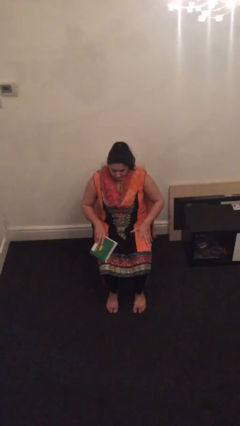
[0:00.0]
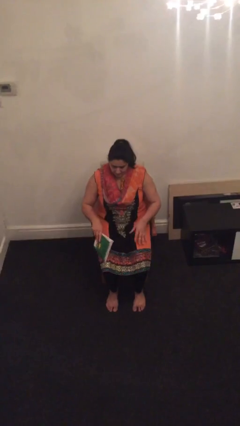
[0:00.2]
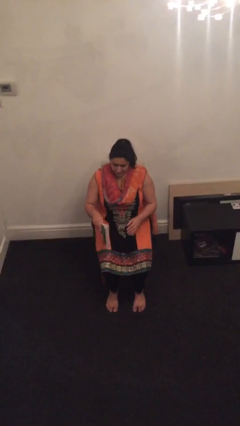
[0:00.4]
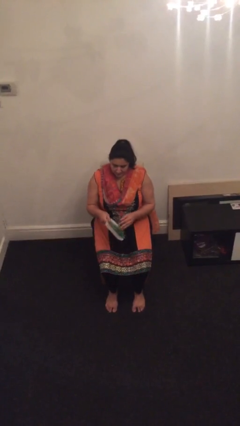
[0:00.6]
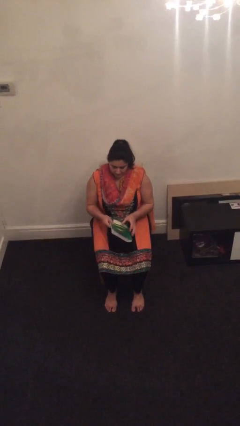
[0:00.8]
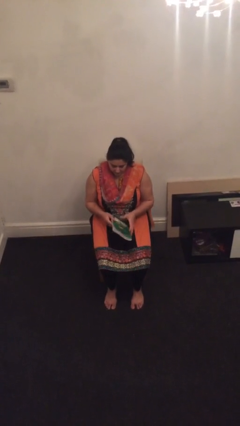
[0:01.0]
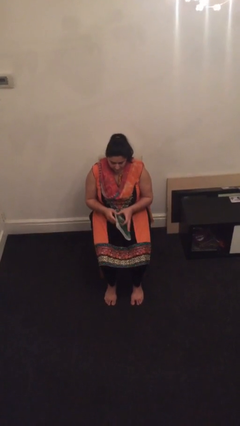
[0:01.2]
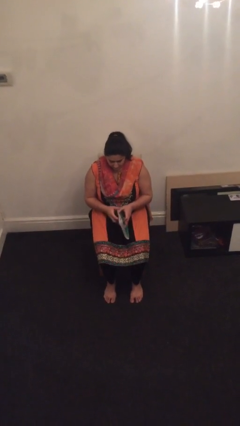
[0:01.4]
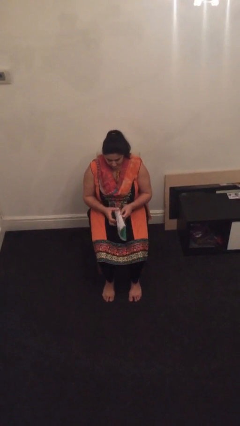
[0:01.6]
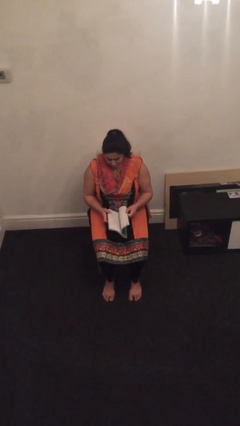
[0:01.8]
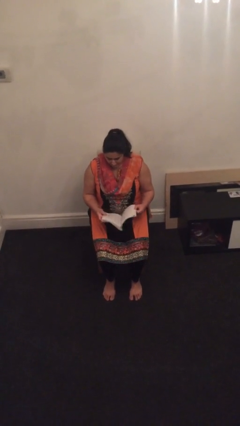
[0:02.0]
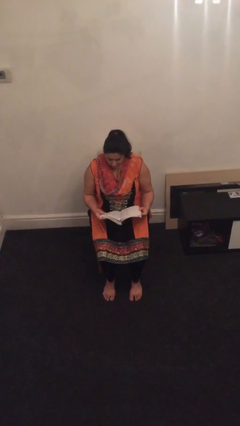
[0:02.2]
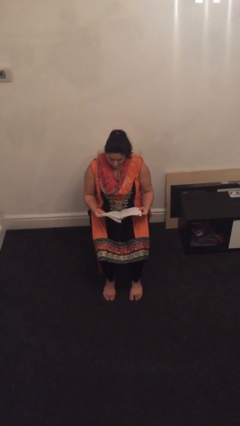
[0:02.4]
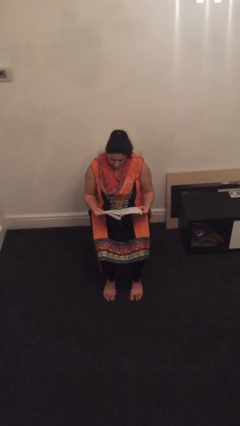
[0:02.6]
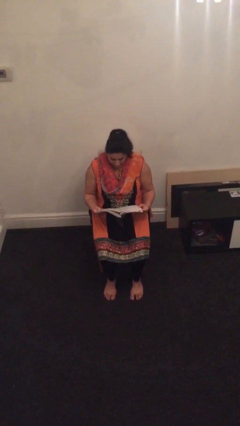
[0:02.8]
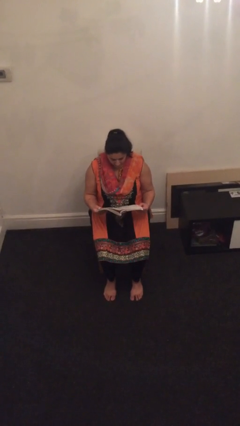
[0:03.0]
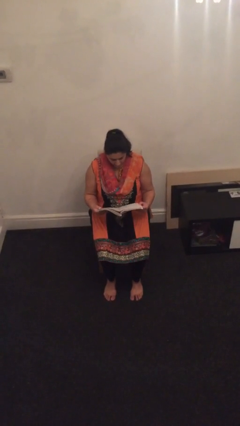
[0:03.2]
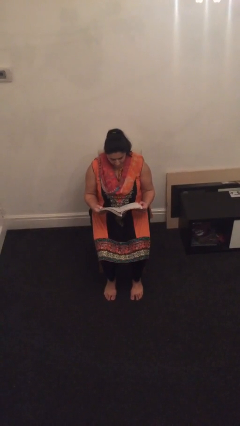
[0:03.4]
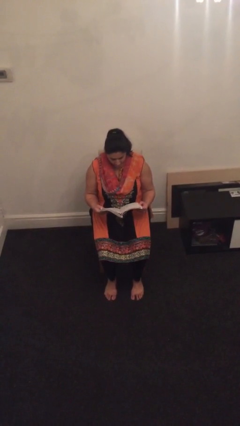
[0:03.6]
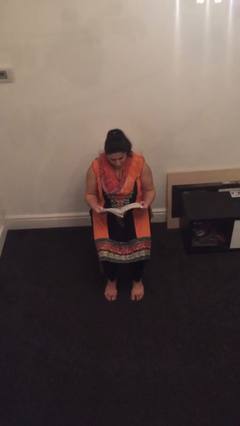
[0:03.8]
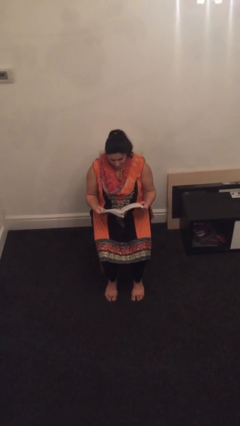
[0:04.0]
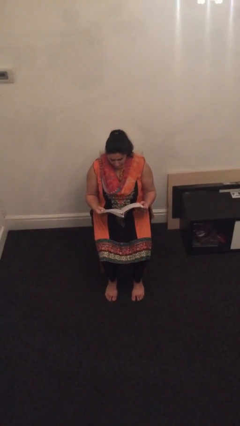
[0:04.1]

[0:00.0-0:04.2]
person reads document

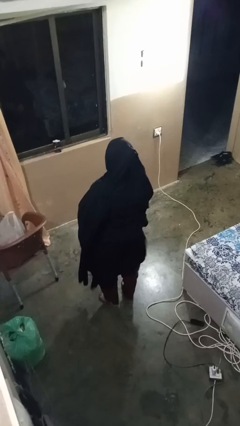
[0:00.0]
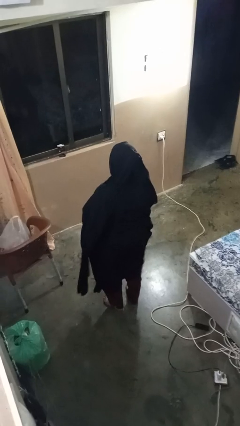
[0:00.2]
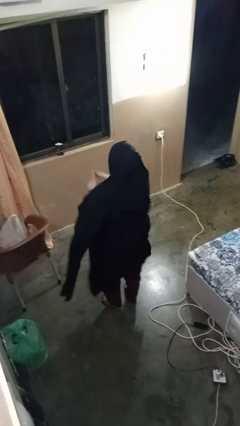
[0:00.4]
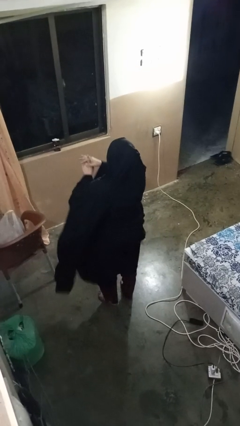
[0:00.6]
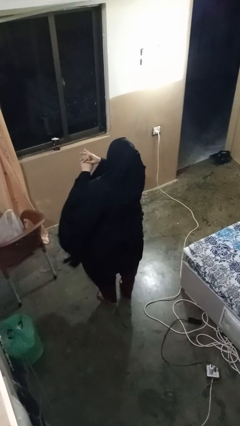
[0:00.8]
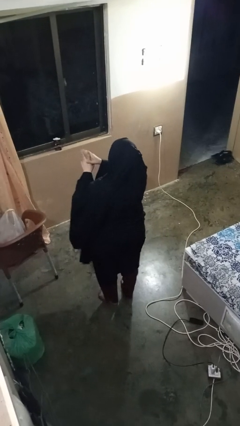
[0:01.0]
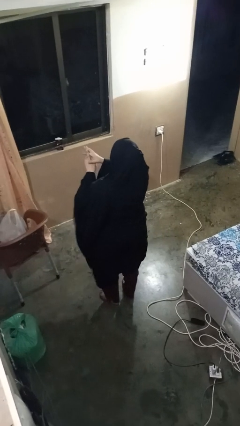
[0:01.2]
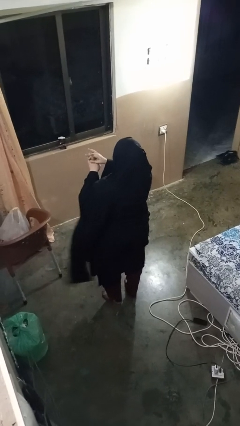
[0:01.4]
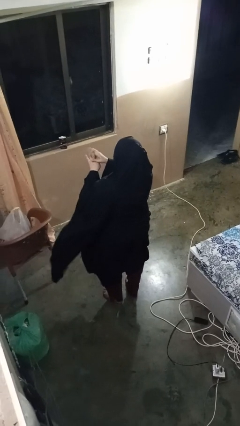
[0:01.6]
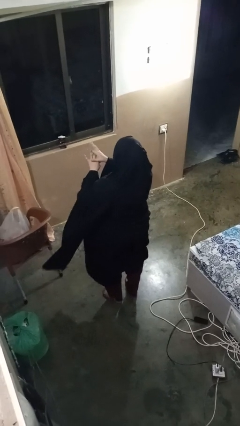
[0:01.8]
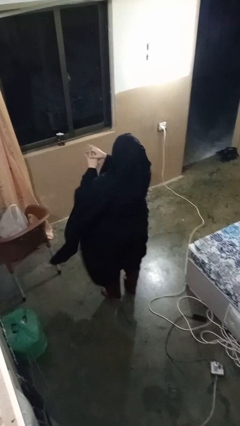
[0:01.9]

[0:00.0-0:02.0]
person cracks knuckles

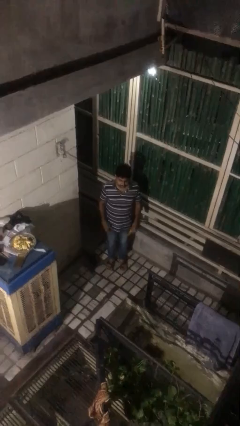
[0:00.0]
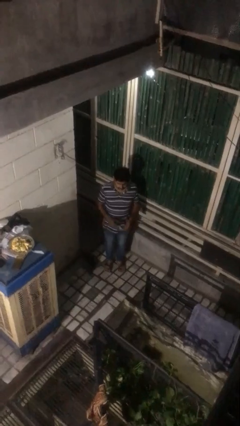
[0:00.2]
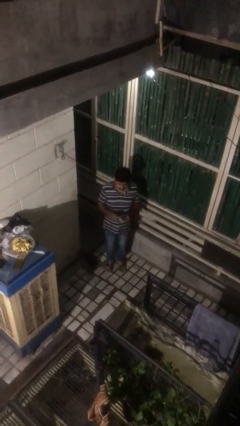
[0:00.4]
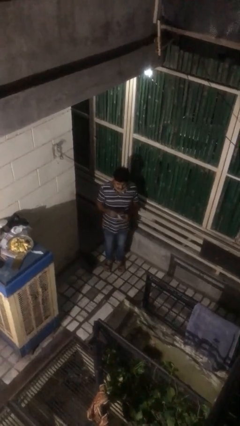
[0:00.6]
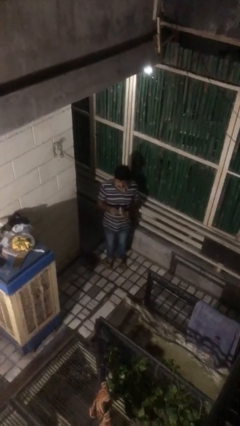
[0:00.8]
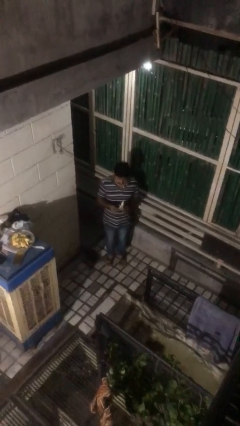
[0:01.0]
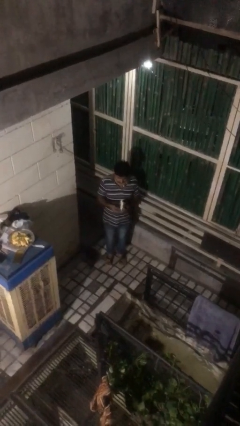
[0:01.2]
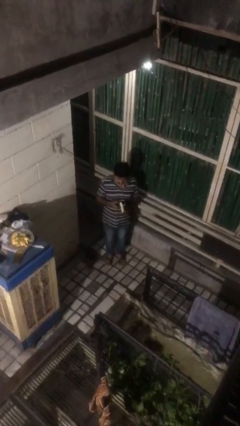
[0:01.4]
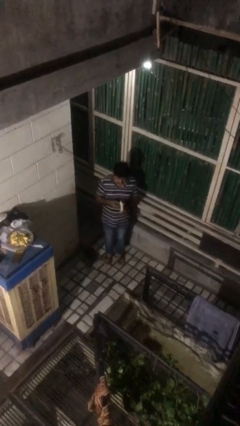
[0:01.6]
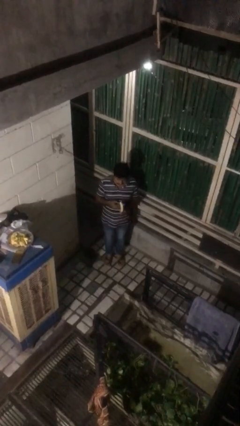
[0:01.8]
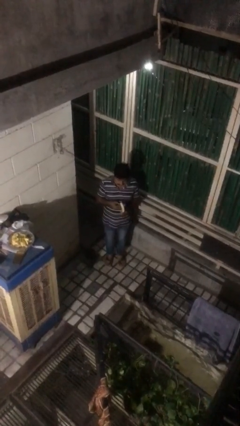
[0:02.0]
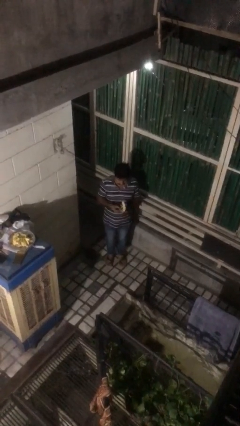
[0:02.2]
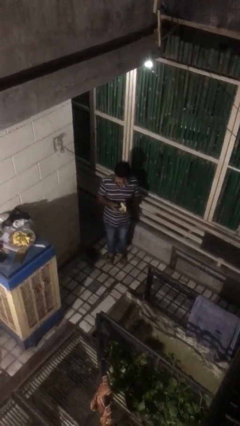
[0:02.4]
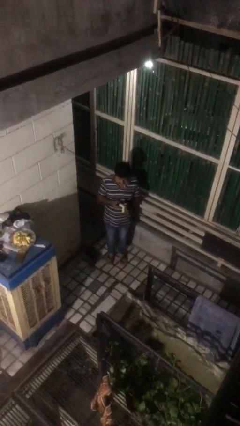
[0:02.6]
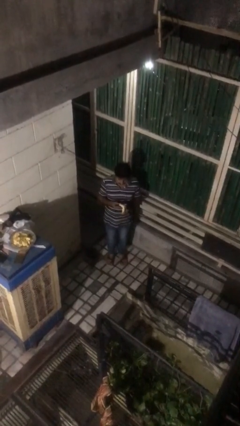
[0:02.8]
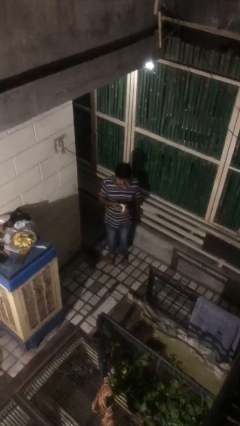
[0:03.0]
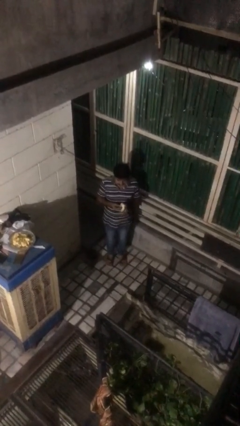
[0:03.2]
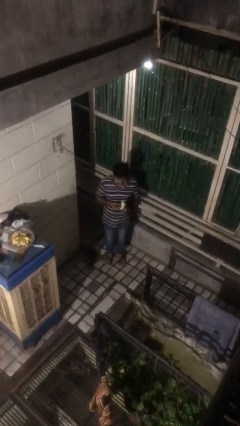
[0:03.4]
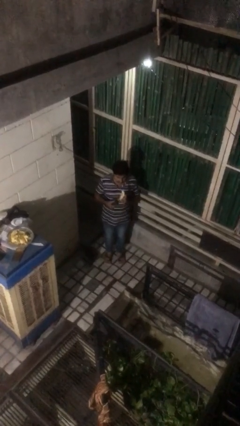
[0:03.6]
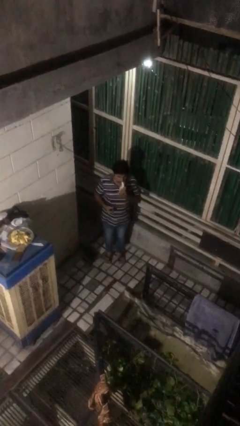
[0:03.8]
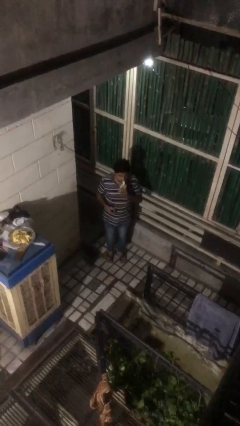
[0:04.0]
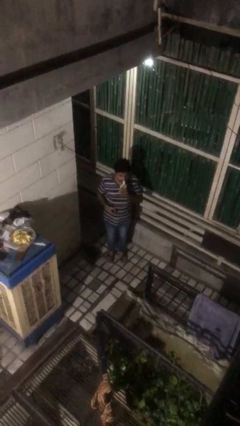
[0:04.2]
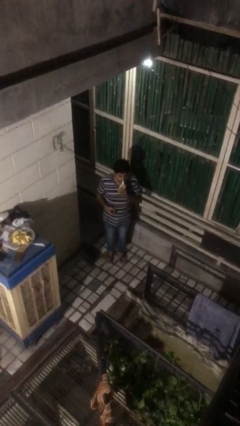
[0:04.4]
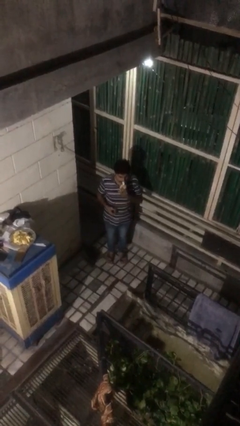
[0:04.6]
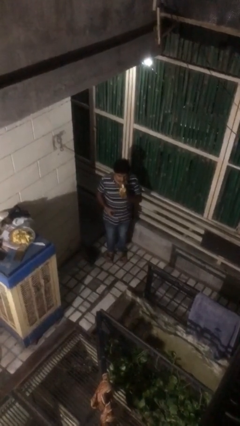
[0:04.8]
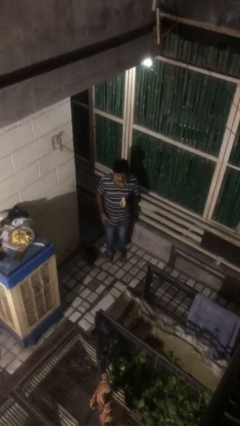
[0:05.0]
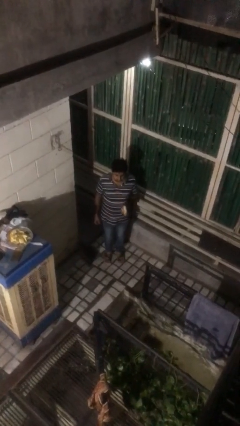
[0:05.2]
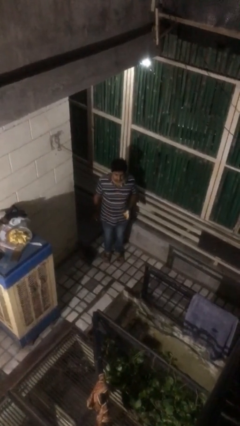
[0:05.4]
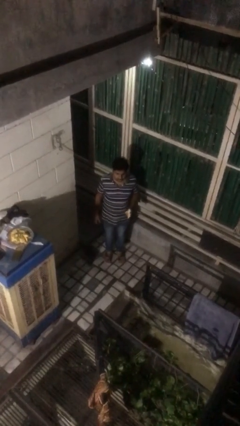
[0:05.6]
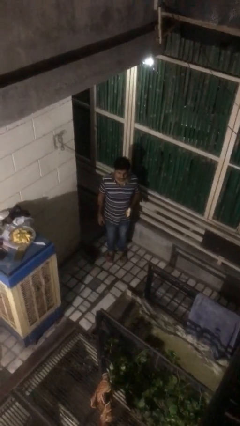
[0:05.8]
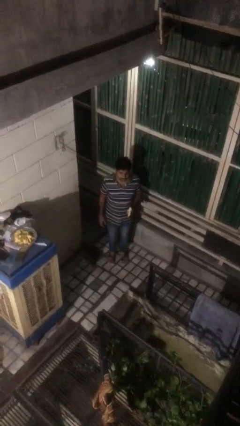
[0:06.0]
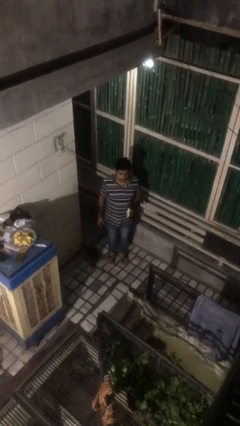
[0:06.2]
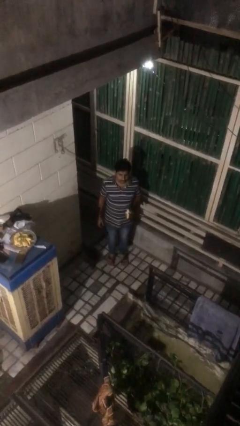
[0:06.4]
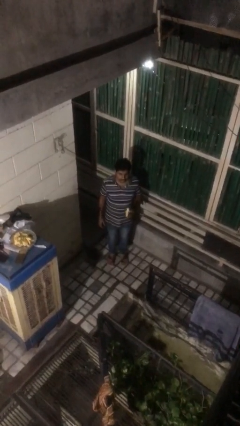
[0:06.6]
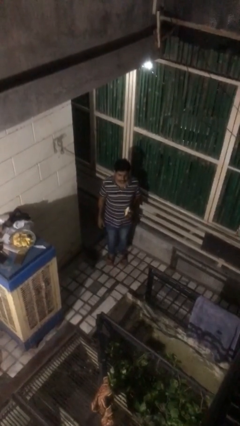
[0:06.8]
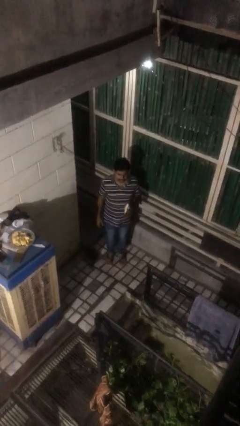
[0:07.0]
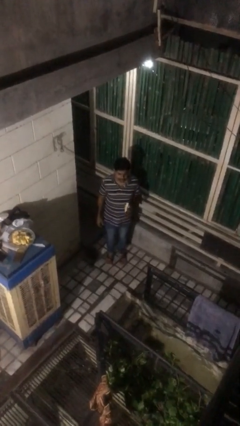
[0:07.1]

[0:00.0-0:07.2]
person eats banana

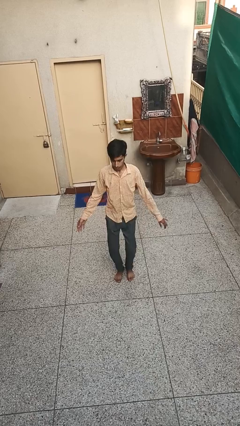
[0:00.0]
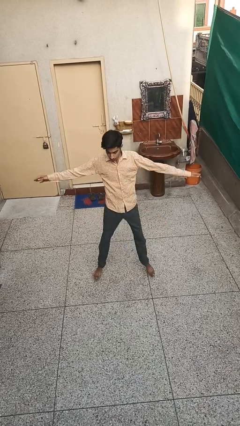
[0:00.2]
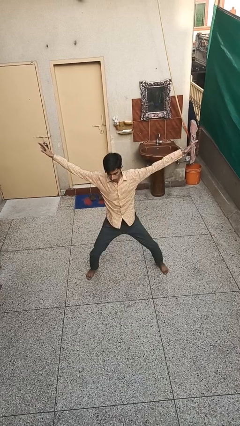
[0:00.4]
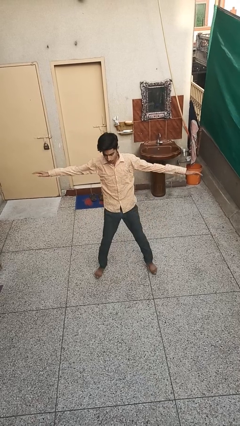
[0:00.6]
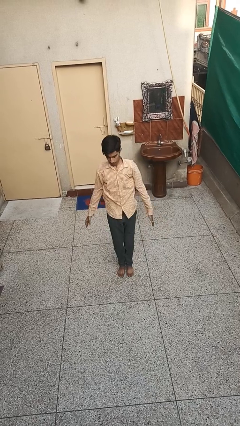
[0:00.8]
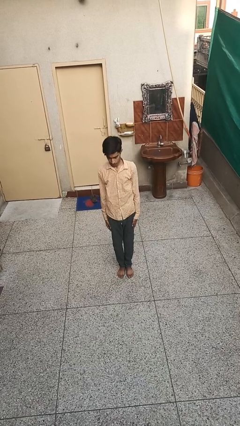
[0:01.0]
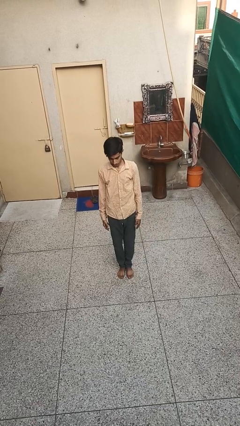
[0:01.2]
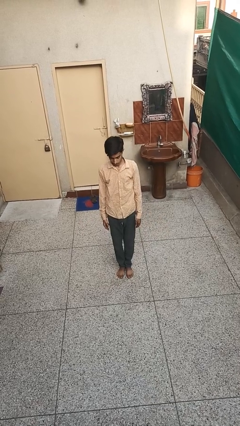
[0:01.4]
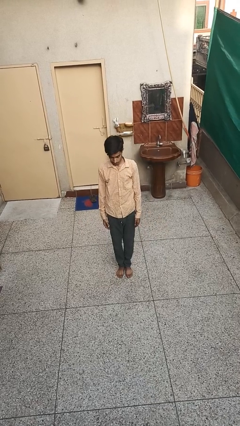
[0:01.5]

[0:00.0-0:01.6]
person exercises with jumping jacks

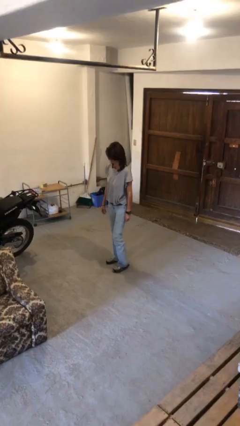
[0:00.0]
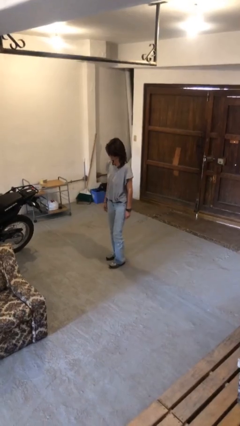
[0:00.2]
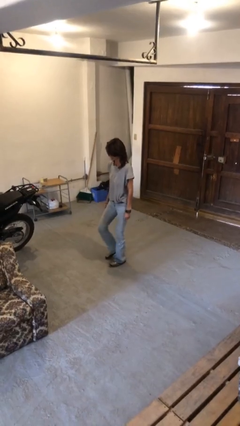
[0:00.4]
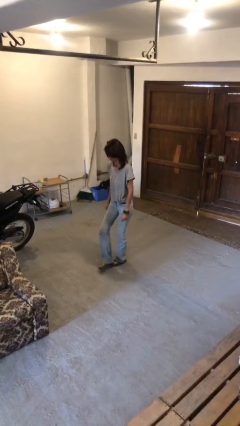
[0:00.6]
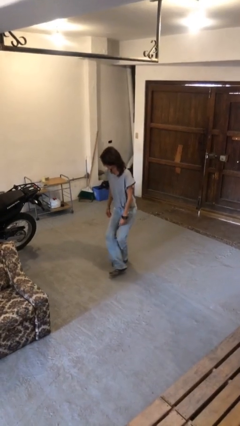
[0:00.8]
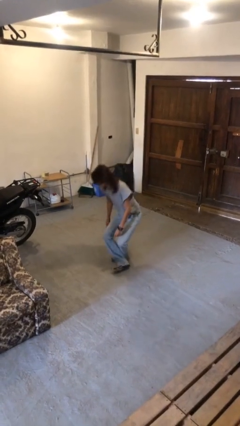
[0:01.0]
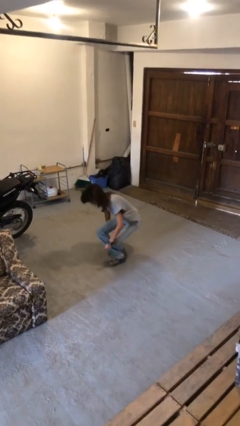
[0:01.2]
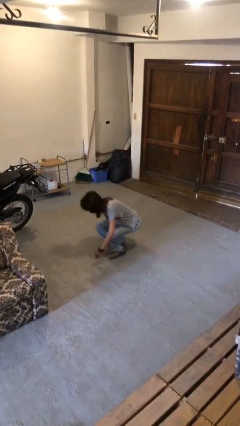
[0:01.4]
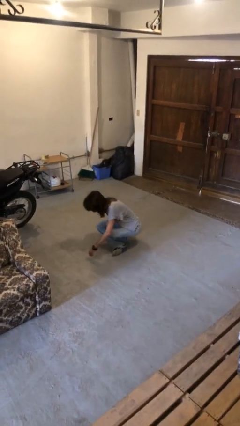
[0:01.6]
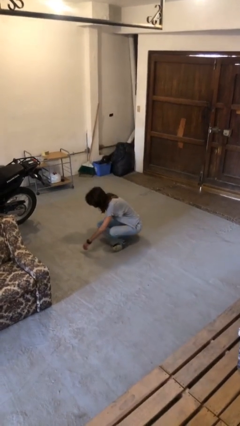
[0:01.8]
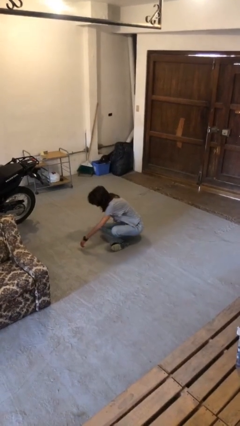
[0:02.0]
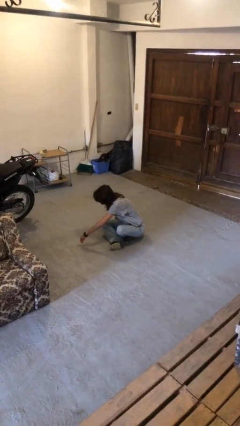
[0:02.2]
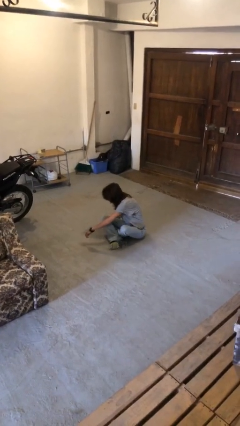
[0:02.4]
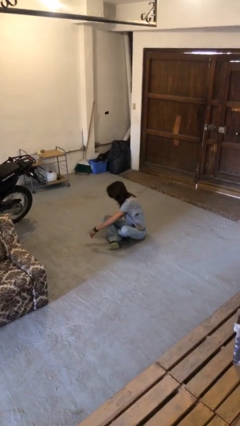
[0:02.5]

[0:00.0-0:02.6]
person sits crisscross
